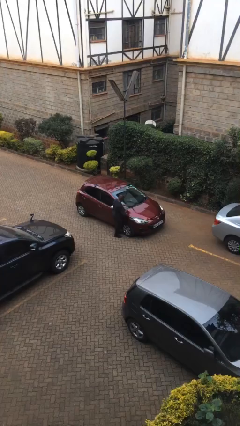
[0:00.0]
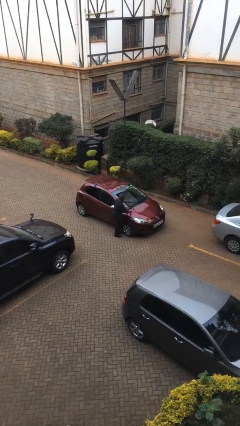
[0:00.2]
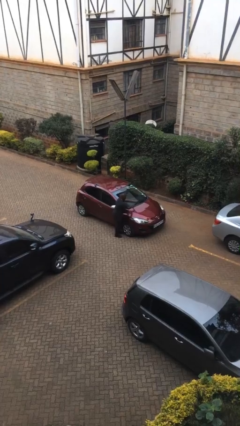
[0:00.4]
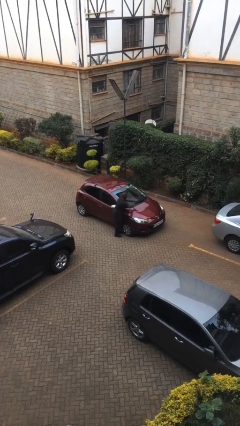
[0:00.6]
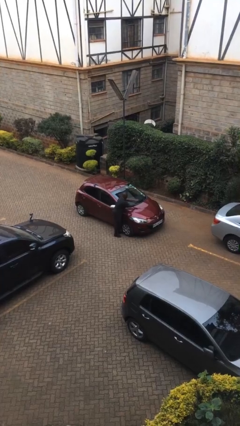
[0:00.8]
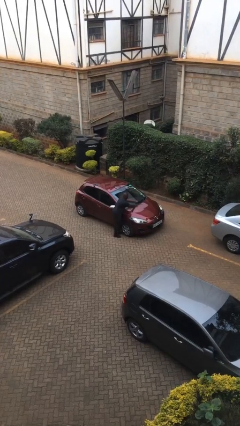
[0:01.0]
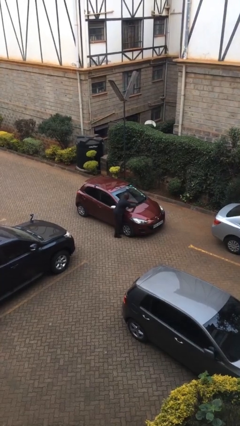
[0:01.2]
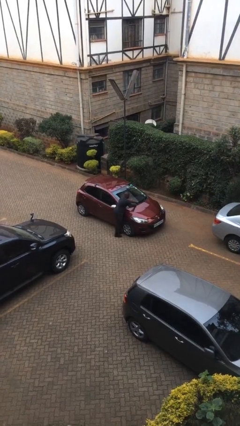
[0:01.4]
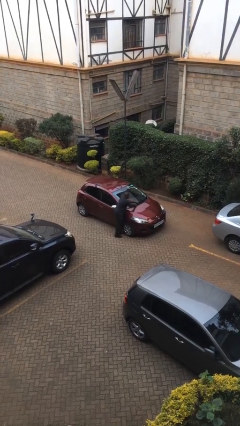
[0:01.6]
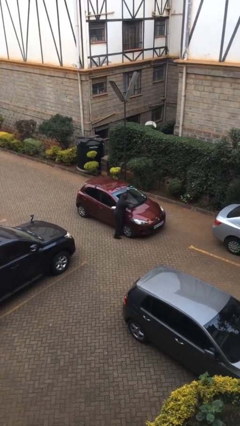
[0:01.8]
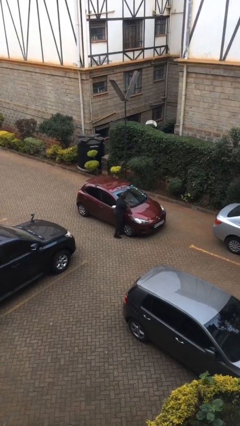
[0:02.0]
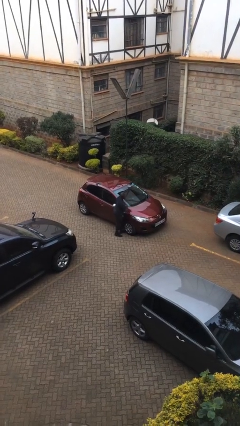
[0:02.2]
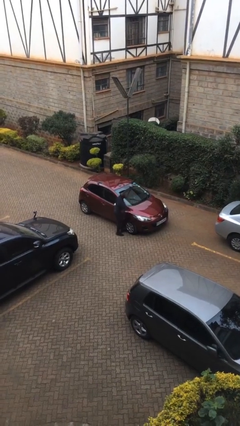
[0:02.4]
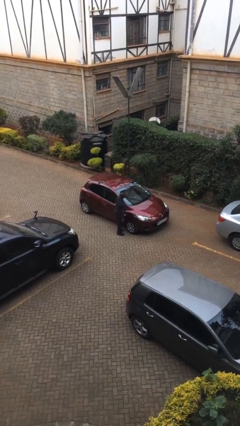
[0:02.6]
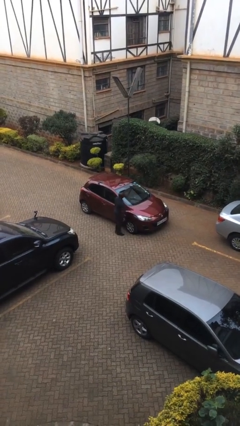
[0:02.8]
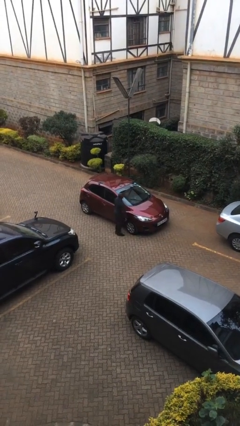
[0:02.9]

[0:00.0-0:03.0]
person flips down car wipers

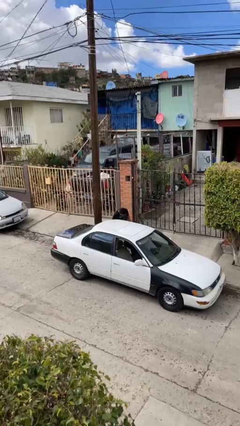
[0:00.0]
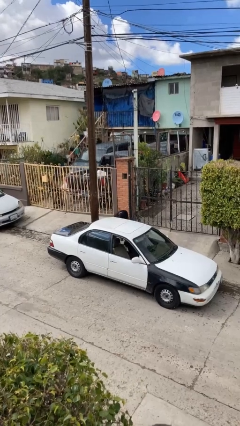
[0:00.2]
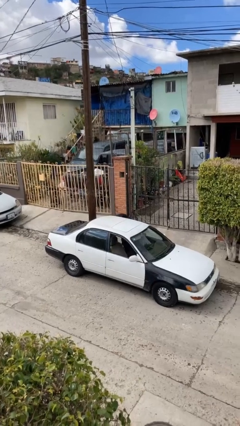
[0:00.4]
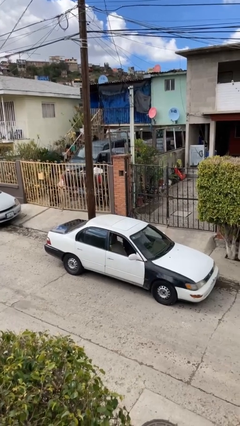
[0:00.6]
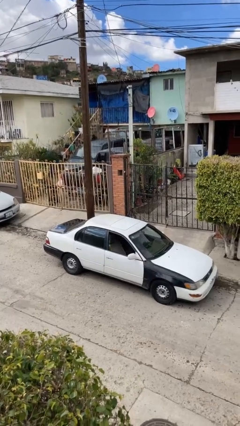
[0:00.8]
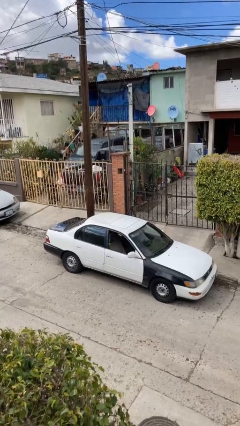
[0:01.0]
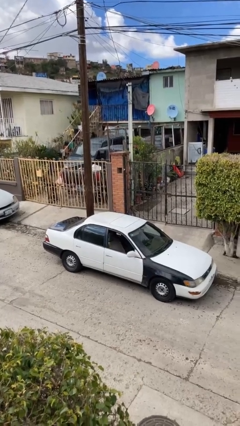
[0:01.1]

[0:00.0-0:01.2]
person enters car

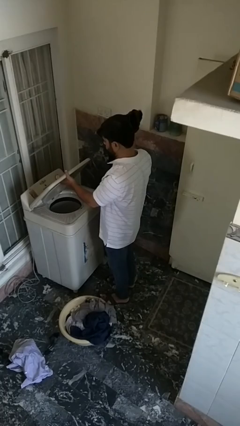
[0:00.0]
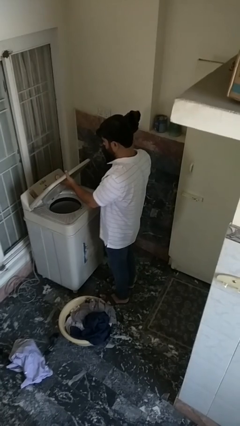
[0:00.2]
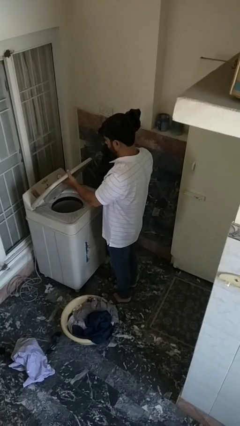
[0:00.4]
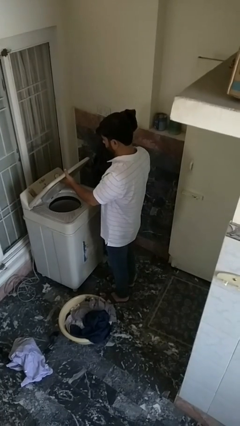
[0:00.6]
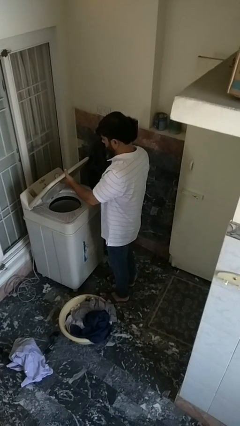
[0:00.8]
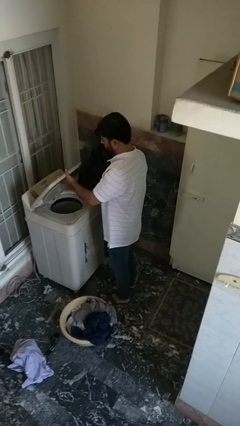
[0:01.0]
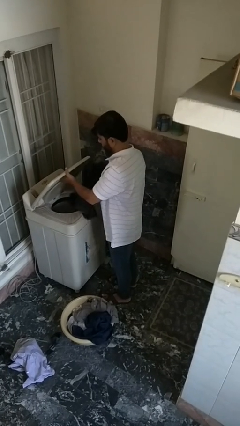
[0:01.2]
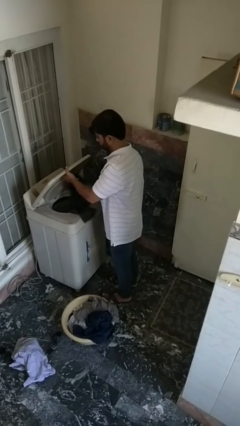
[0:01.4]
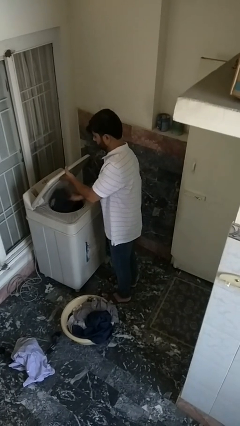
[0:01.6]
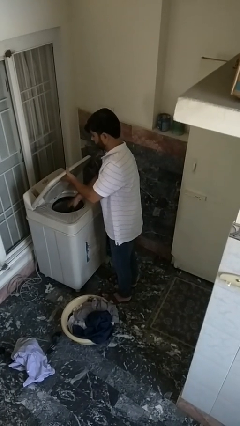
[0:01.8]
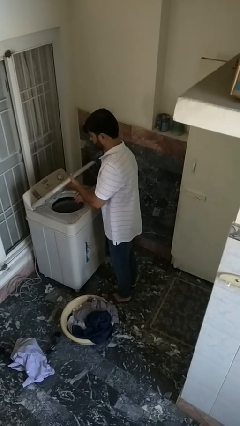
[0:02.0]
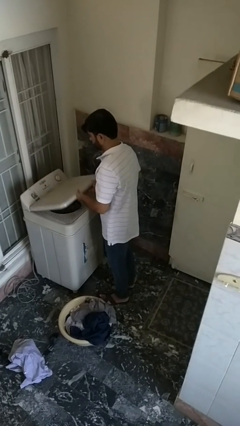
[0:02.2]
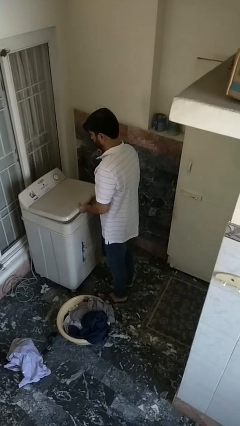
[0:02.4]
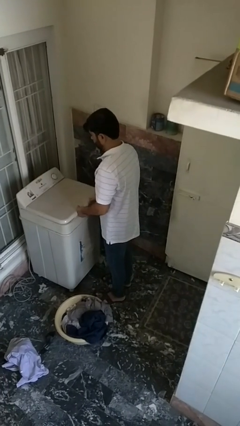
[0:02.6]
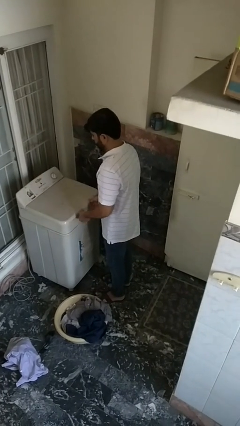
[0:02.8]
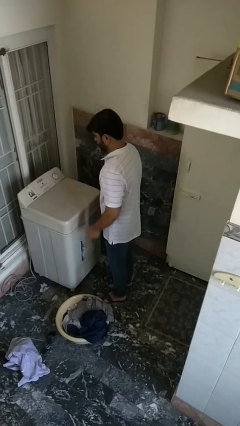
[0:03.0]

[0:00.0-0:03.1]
person loads dryer

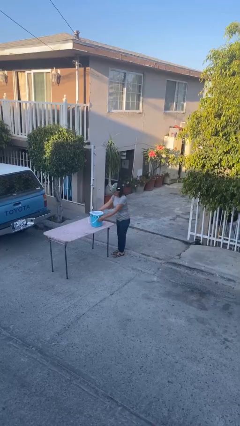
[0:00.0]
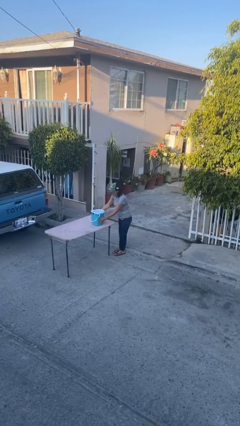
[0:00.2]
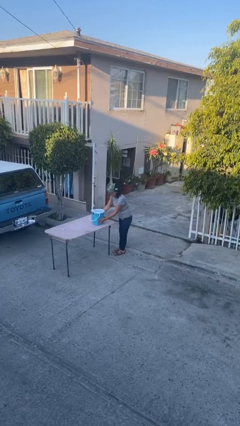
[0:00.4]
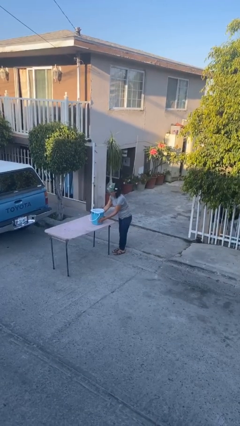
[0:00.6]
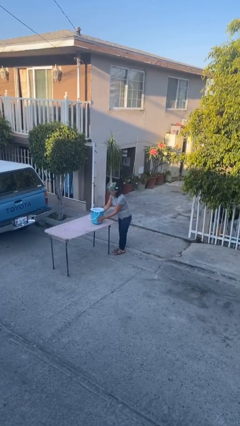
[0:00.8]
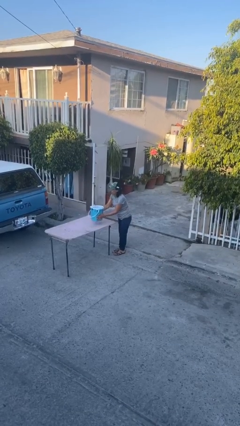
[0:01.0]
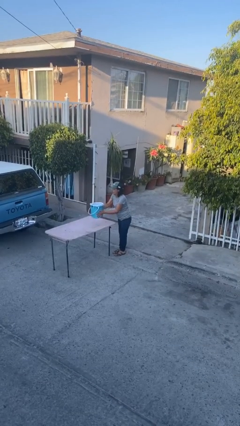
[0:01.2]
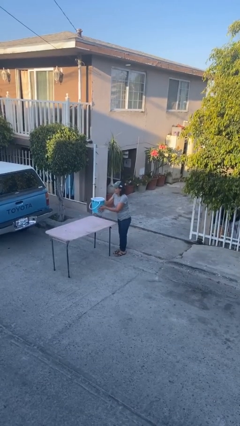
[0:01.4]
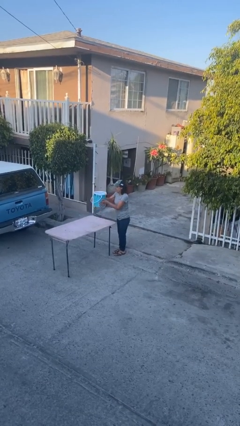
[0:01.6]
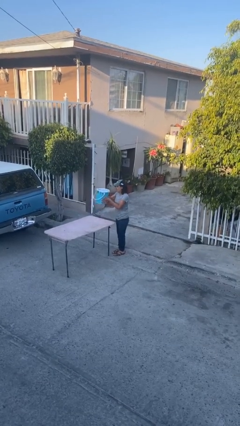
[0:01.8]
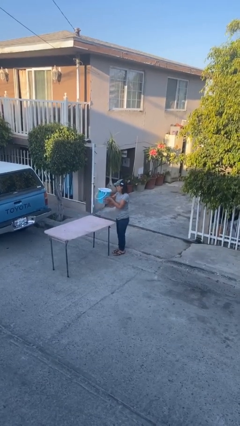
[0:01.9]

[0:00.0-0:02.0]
person picks up object from table

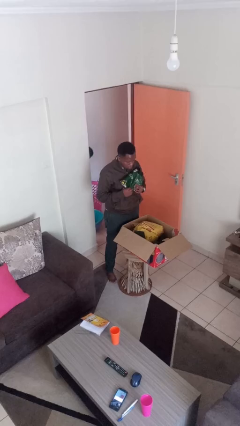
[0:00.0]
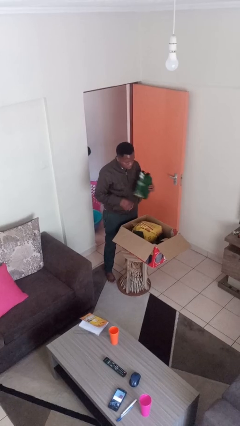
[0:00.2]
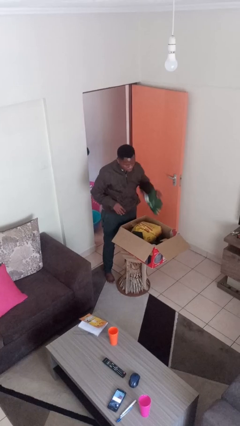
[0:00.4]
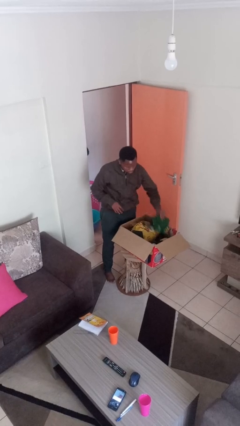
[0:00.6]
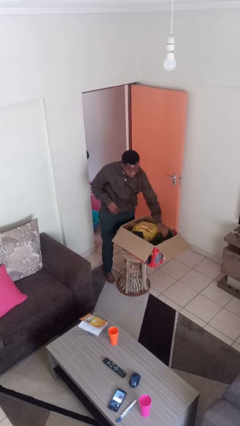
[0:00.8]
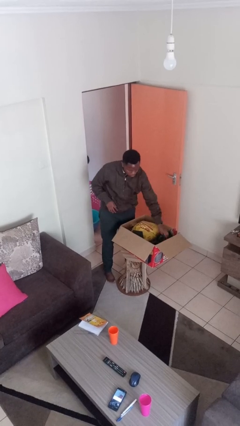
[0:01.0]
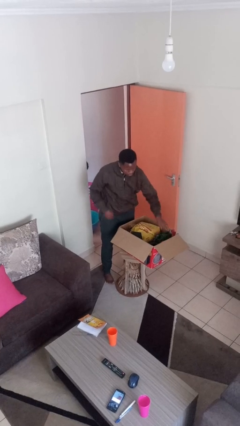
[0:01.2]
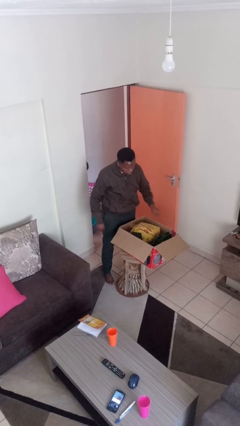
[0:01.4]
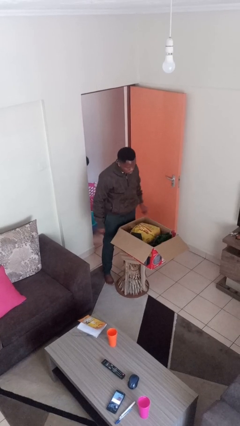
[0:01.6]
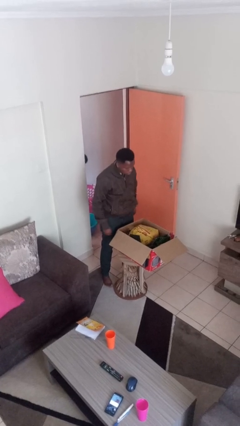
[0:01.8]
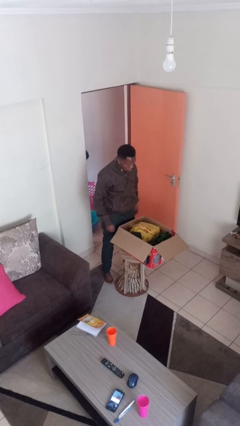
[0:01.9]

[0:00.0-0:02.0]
person puts object into box

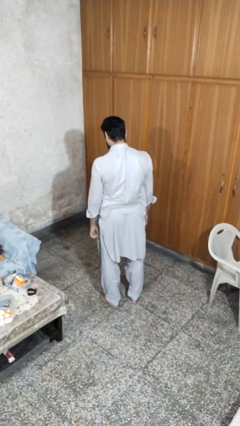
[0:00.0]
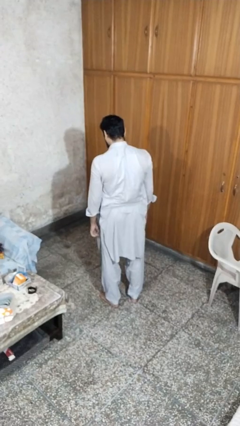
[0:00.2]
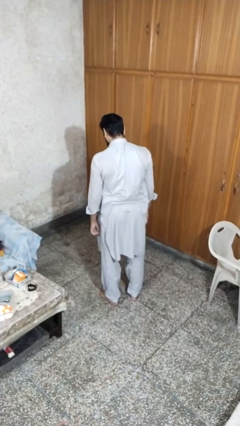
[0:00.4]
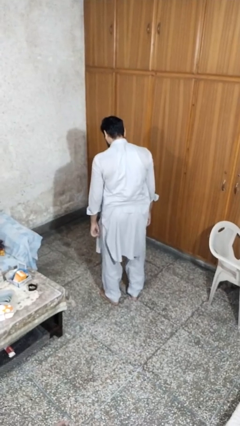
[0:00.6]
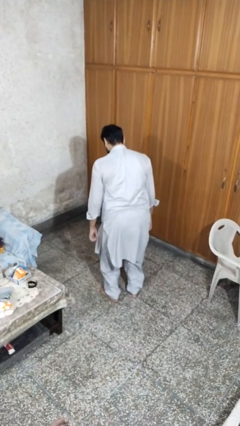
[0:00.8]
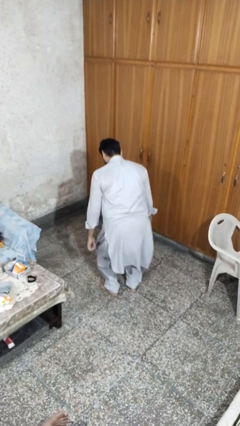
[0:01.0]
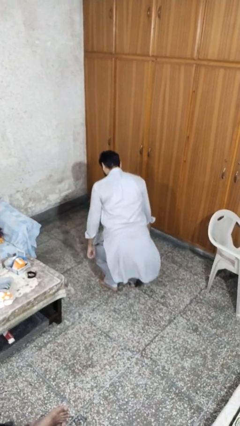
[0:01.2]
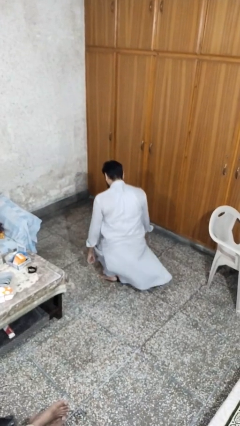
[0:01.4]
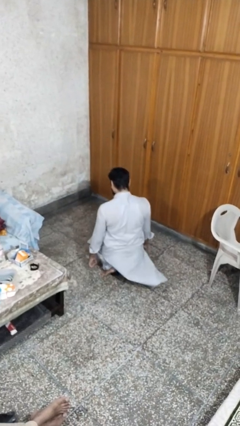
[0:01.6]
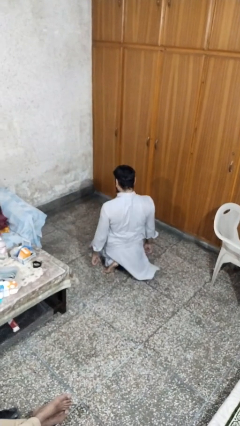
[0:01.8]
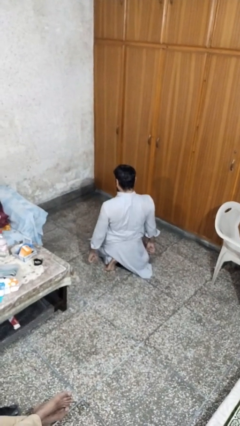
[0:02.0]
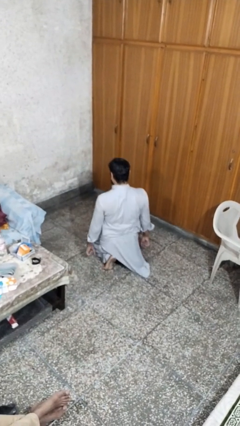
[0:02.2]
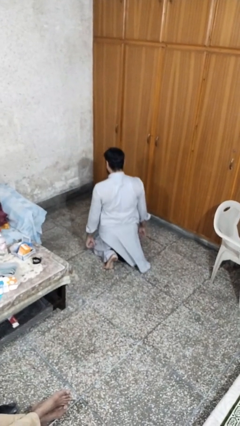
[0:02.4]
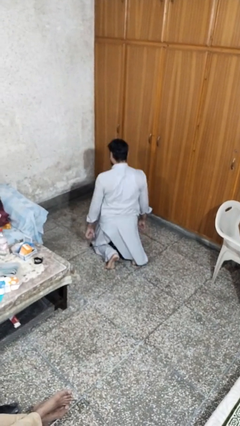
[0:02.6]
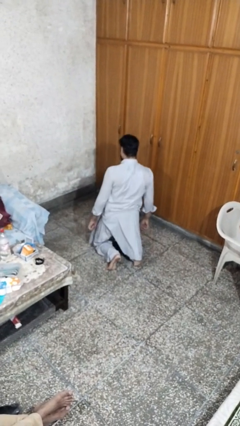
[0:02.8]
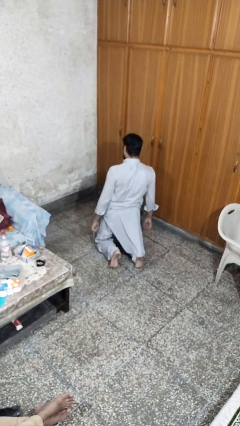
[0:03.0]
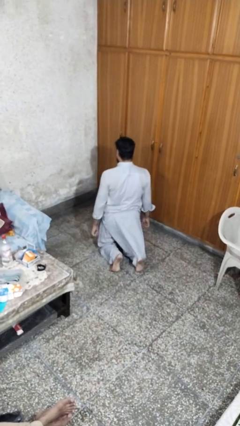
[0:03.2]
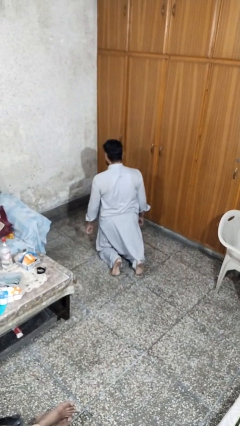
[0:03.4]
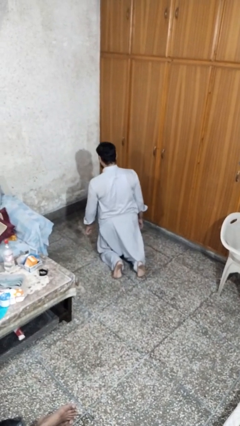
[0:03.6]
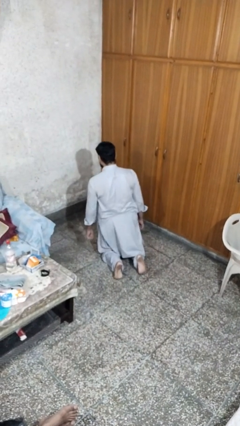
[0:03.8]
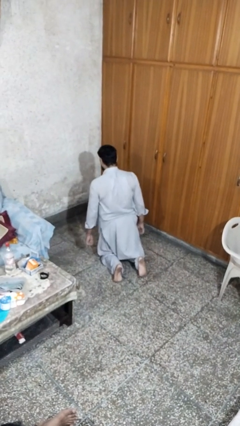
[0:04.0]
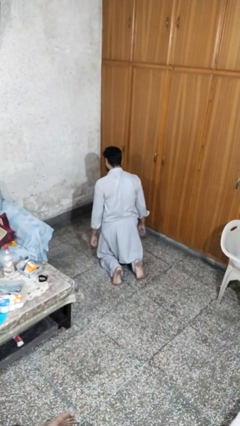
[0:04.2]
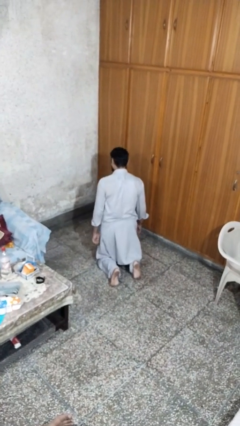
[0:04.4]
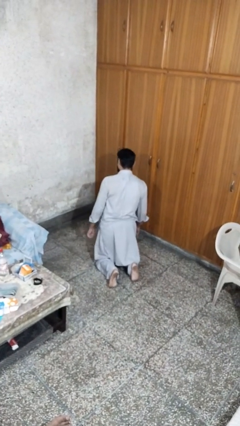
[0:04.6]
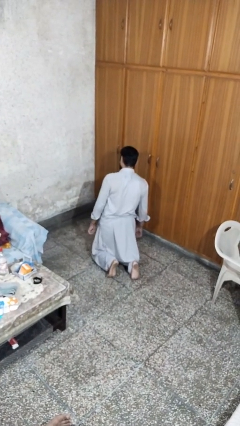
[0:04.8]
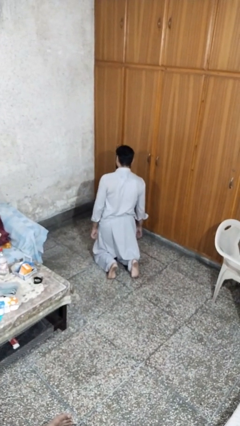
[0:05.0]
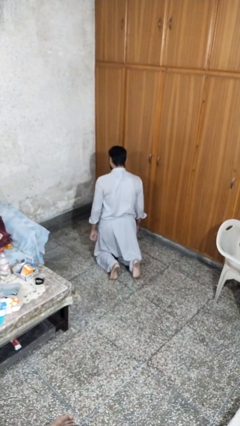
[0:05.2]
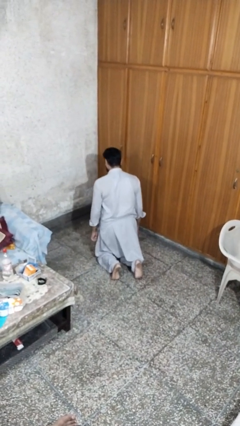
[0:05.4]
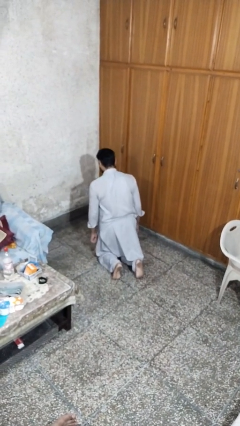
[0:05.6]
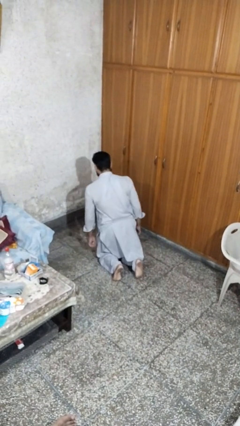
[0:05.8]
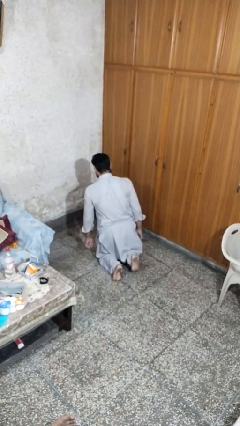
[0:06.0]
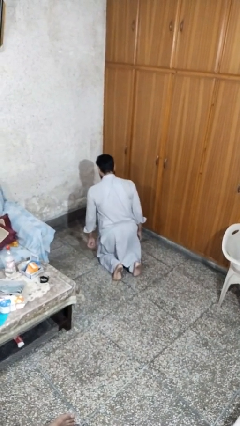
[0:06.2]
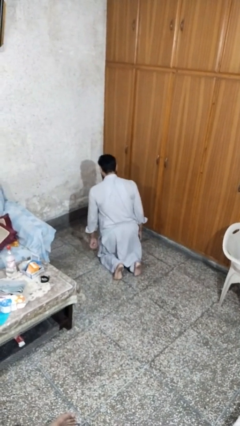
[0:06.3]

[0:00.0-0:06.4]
person exercises with lunges
